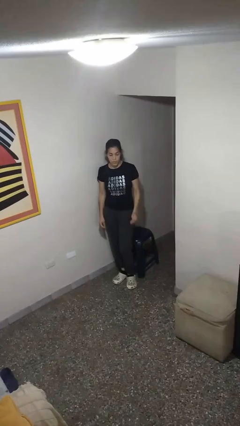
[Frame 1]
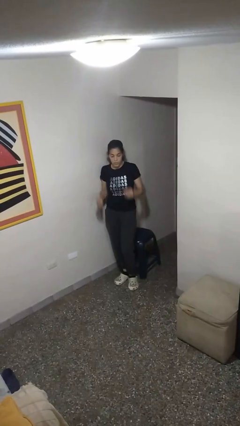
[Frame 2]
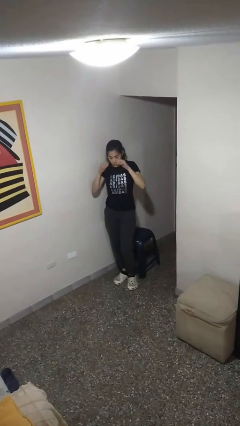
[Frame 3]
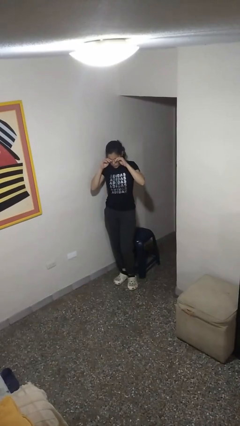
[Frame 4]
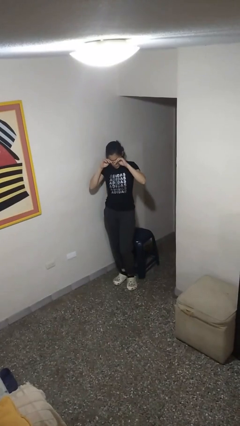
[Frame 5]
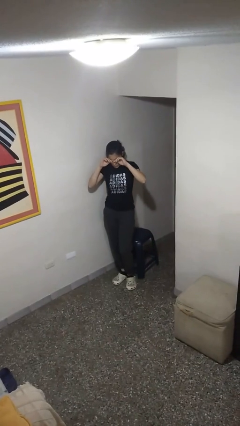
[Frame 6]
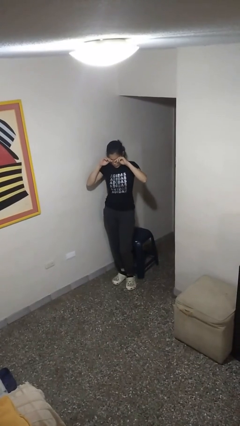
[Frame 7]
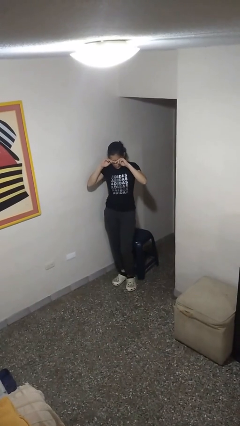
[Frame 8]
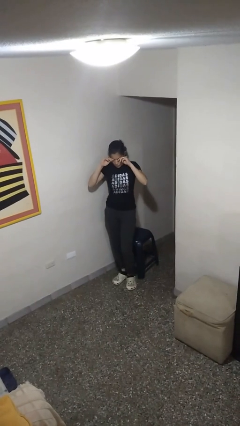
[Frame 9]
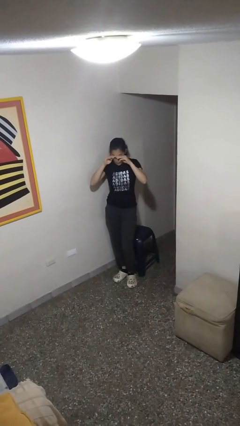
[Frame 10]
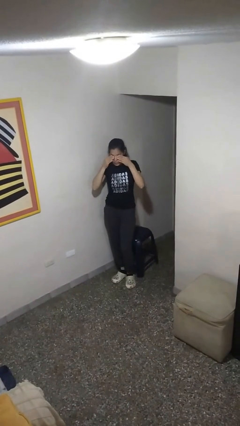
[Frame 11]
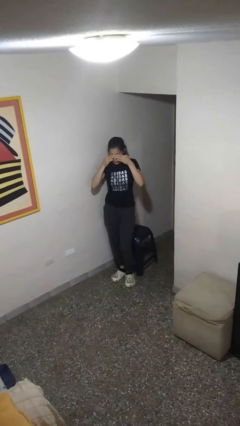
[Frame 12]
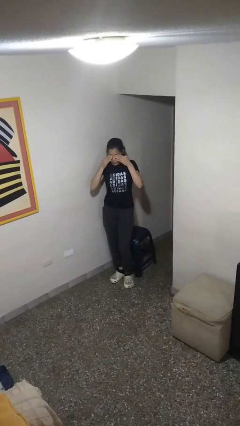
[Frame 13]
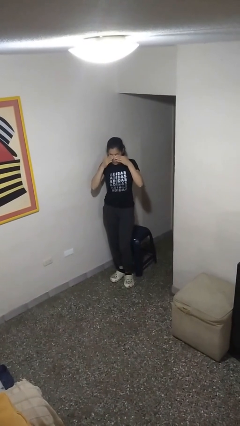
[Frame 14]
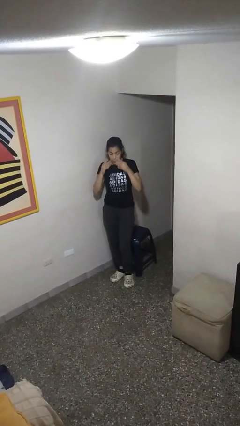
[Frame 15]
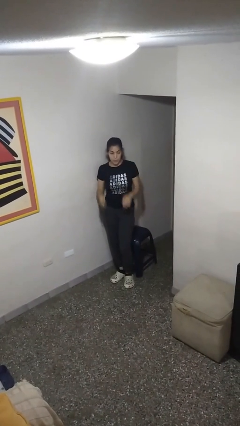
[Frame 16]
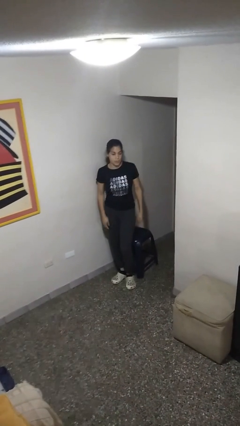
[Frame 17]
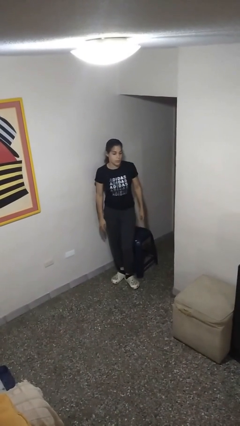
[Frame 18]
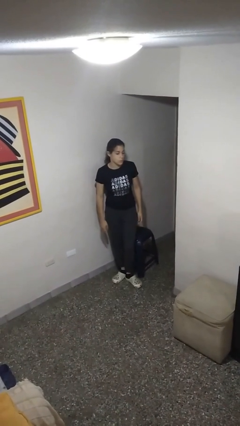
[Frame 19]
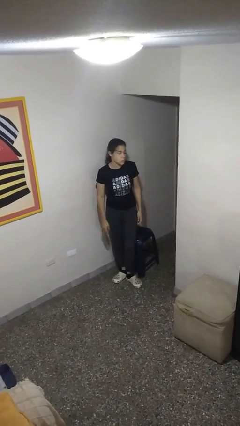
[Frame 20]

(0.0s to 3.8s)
person rubs eyes

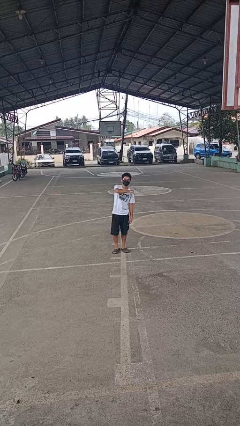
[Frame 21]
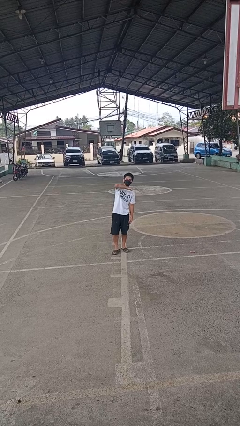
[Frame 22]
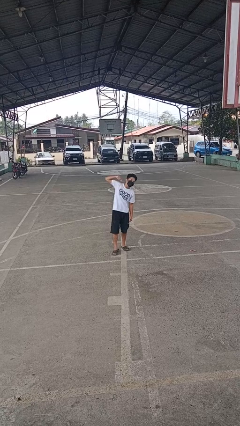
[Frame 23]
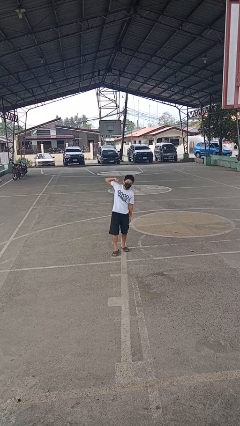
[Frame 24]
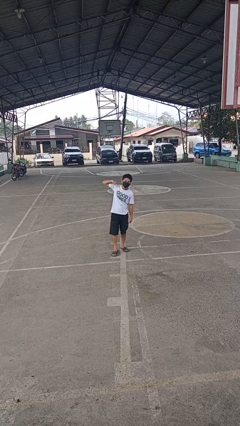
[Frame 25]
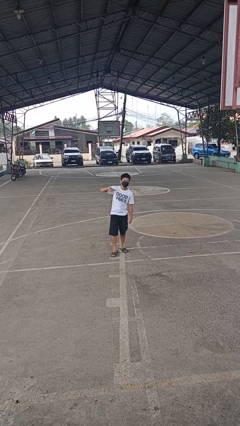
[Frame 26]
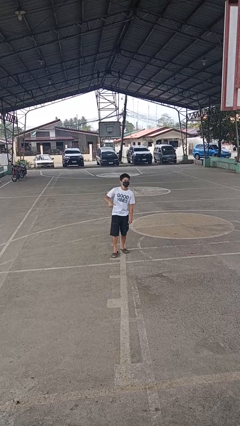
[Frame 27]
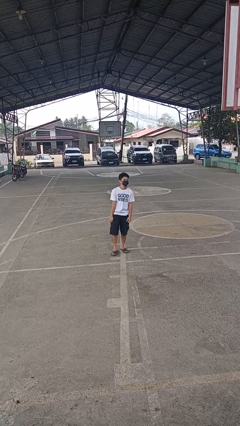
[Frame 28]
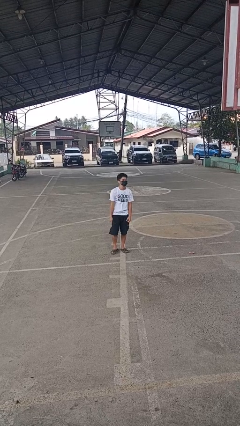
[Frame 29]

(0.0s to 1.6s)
person gestures cut

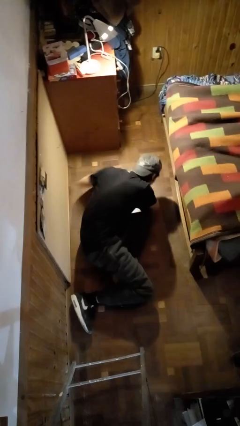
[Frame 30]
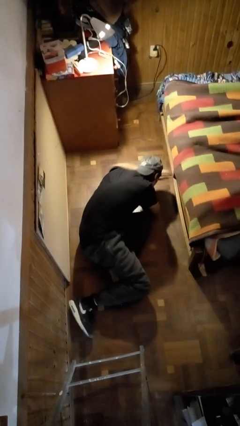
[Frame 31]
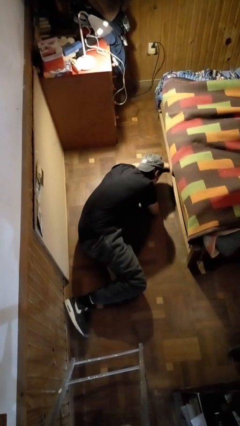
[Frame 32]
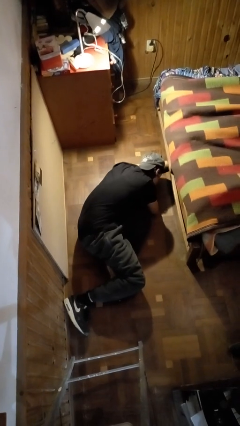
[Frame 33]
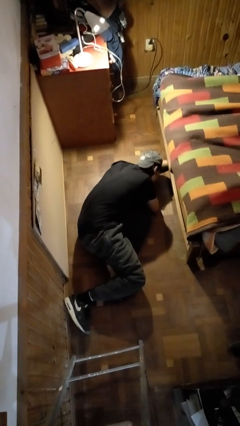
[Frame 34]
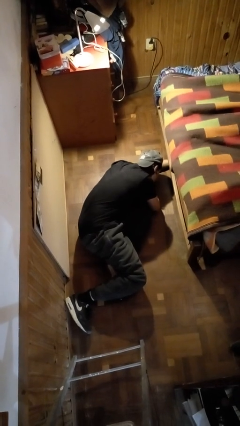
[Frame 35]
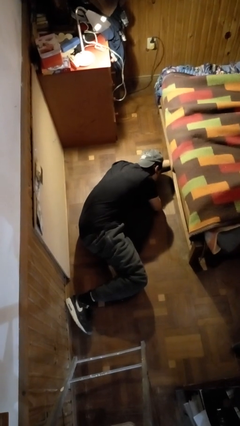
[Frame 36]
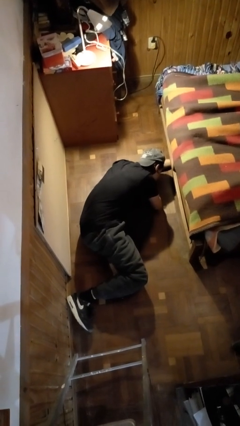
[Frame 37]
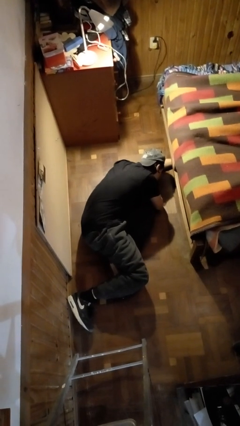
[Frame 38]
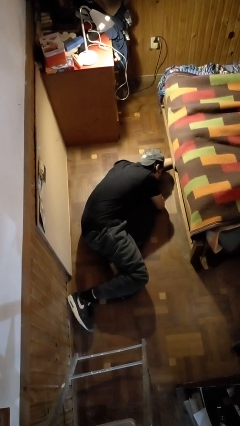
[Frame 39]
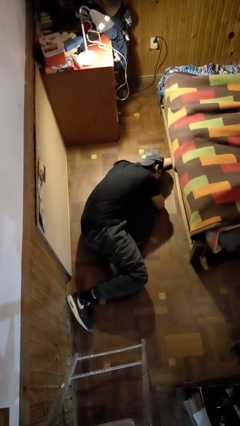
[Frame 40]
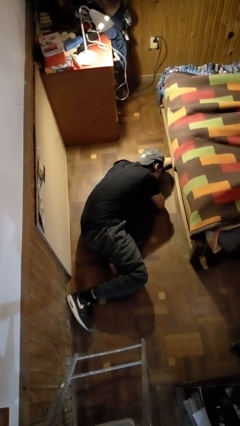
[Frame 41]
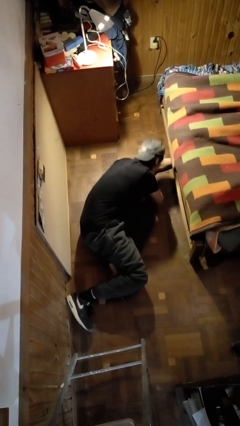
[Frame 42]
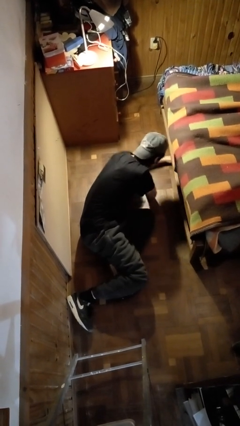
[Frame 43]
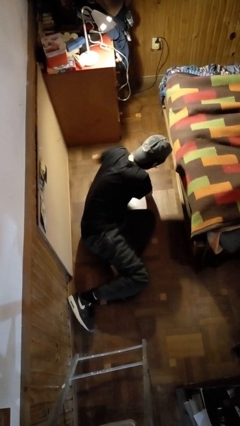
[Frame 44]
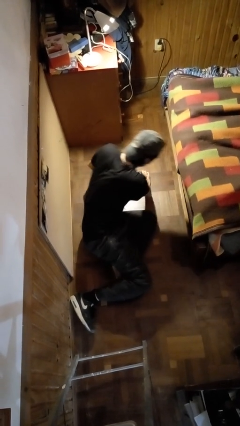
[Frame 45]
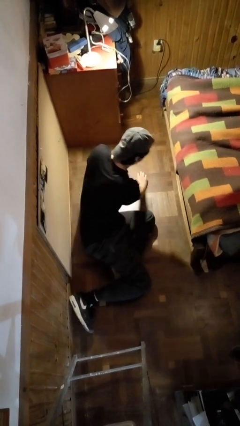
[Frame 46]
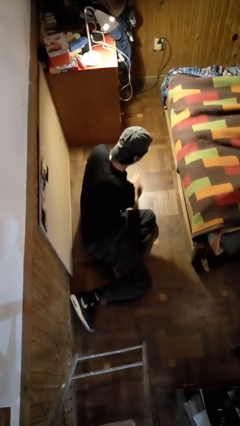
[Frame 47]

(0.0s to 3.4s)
person searches under bed

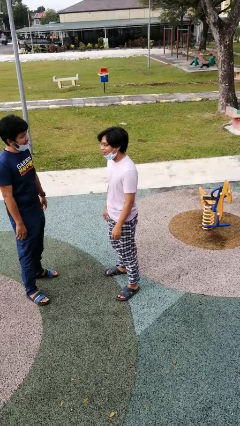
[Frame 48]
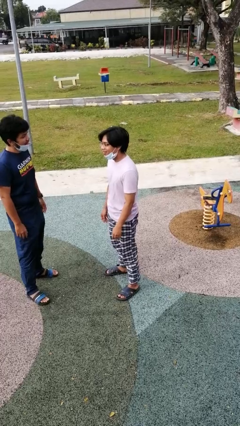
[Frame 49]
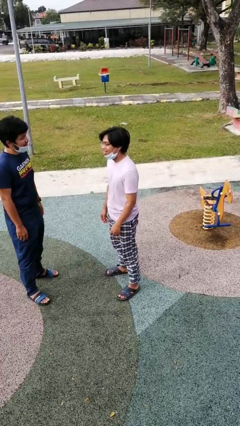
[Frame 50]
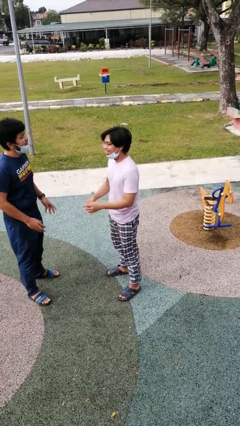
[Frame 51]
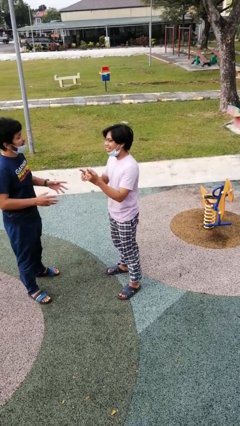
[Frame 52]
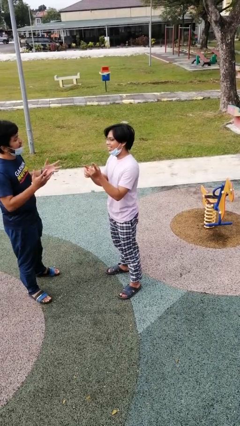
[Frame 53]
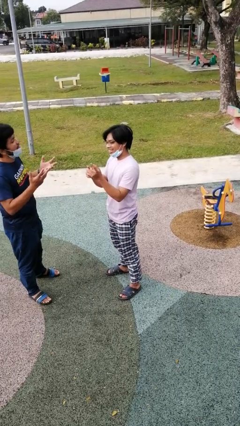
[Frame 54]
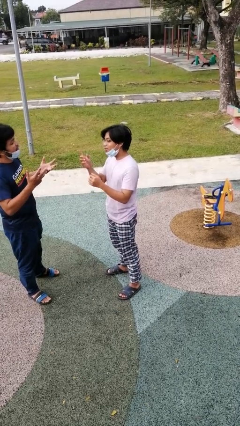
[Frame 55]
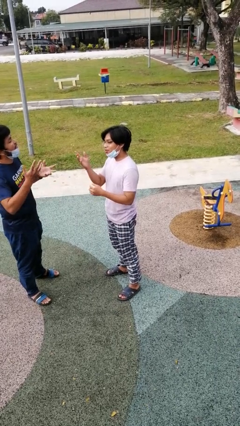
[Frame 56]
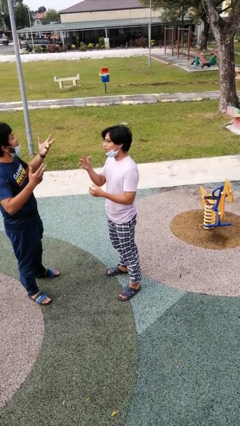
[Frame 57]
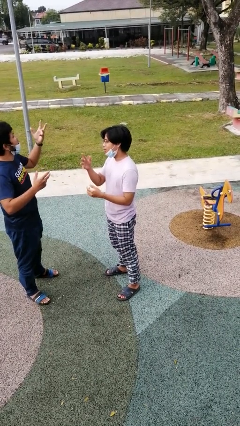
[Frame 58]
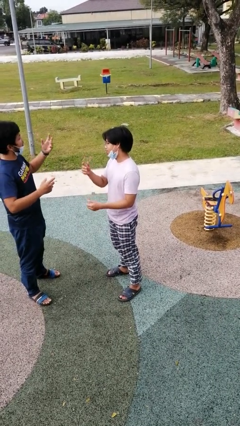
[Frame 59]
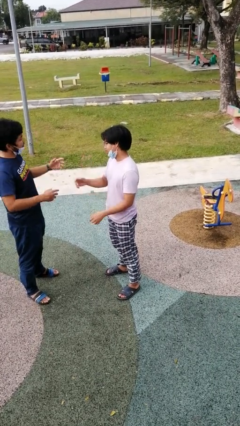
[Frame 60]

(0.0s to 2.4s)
person talks to person

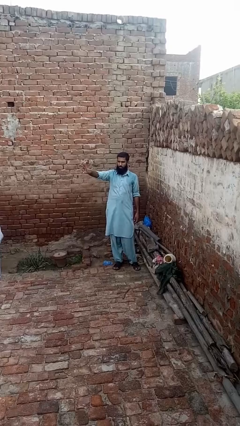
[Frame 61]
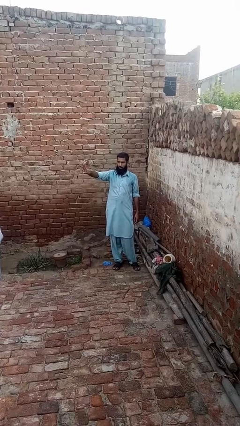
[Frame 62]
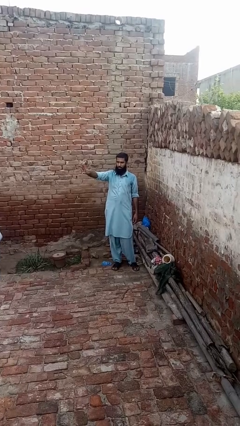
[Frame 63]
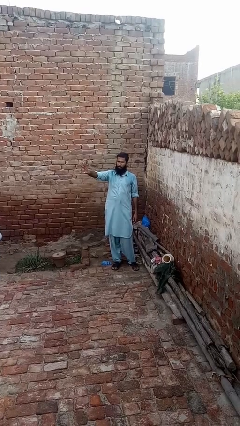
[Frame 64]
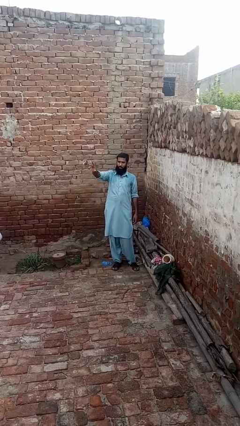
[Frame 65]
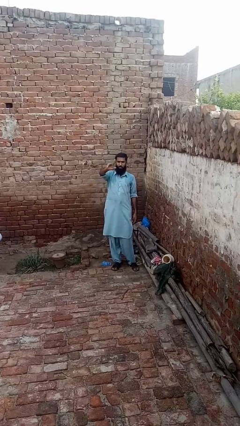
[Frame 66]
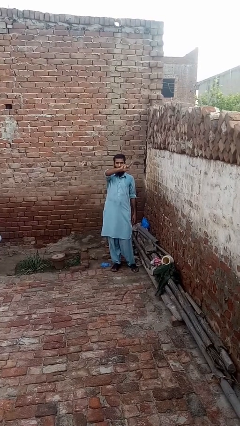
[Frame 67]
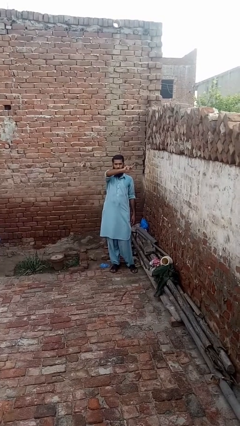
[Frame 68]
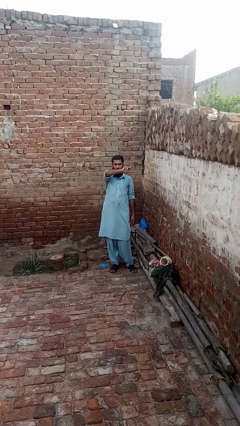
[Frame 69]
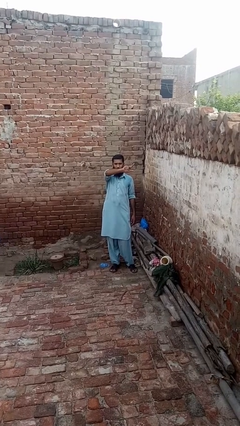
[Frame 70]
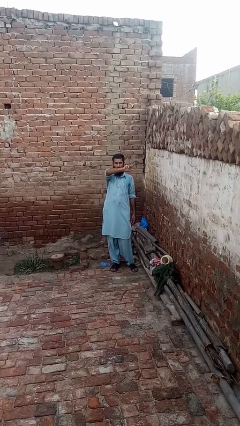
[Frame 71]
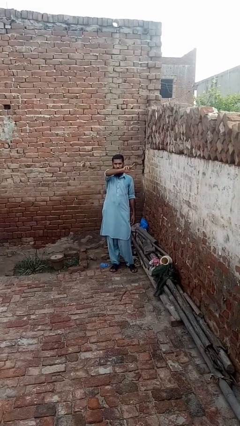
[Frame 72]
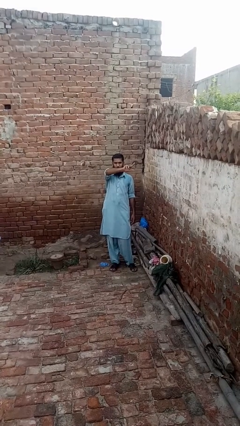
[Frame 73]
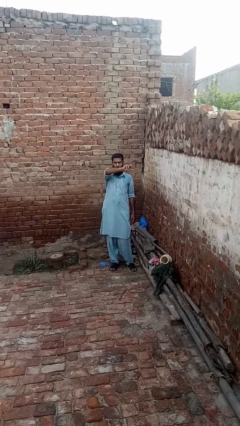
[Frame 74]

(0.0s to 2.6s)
person gestures swipe left

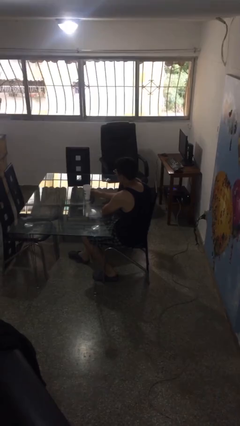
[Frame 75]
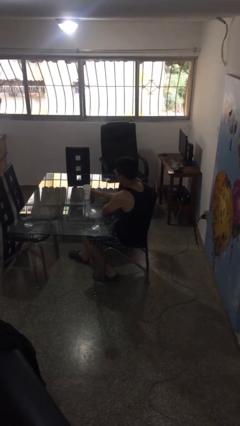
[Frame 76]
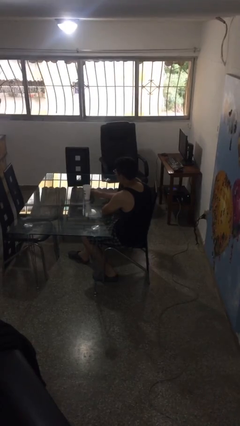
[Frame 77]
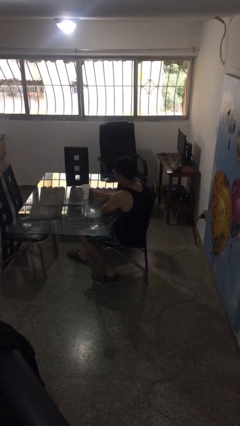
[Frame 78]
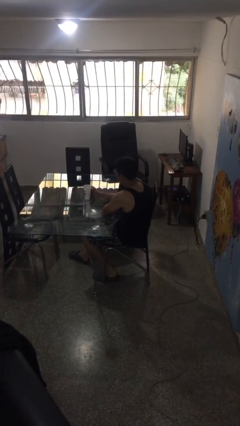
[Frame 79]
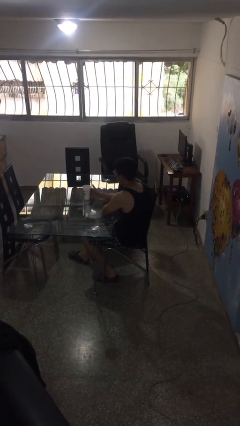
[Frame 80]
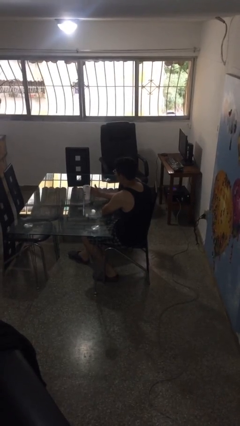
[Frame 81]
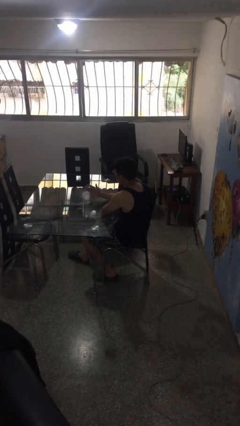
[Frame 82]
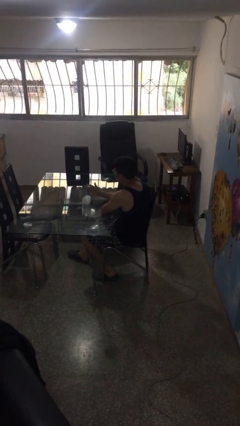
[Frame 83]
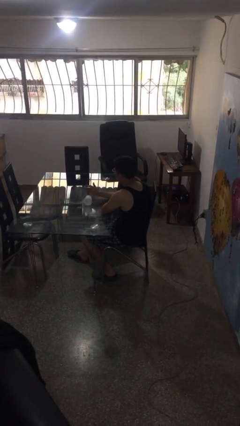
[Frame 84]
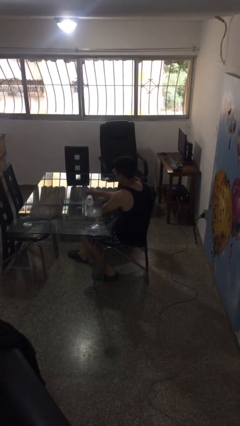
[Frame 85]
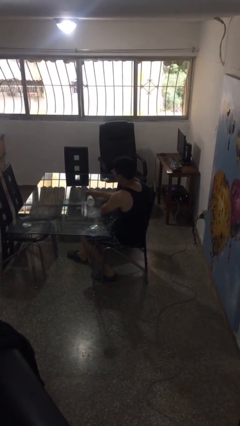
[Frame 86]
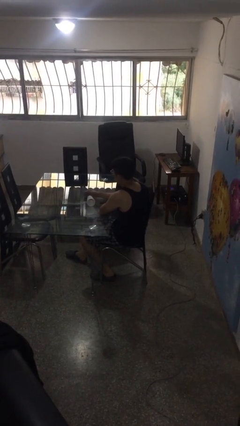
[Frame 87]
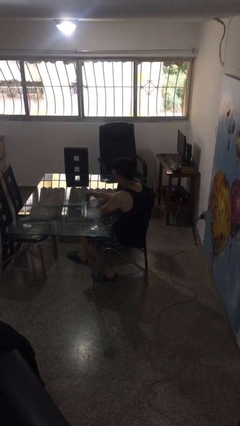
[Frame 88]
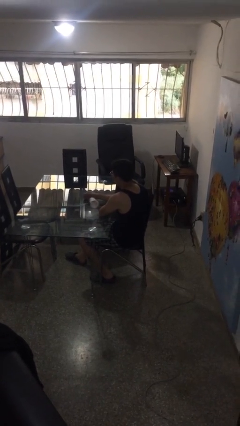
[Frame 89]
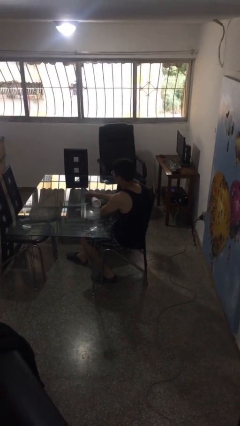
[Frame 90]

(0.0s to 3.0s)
person knocks over glass

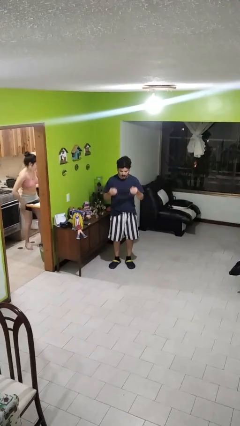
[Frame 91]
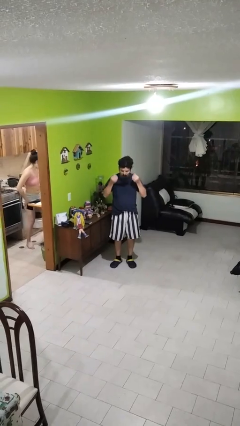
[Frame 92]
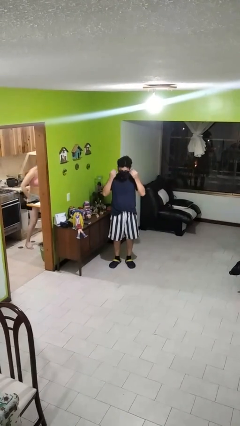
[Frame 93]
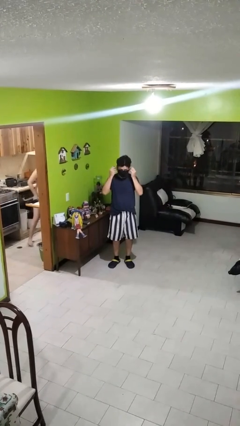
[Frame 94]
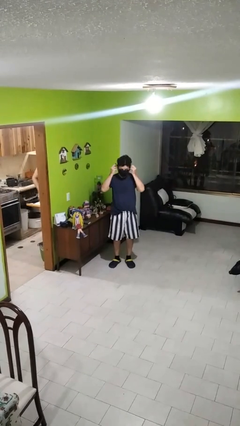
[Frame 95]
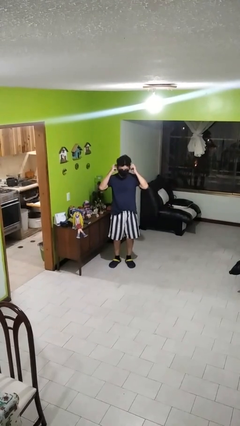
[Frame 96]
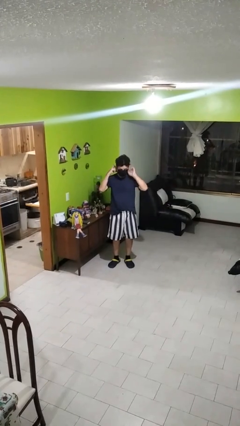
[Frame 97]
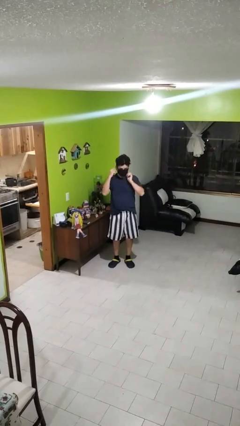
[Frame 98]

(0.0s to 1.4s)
person puts on facemask
